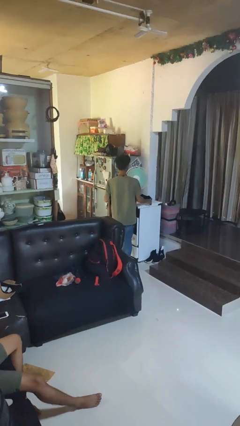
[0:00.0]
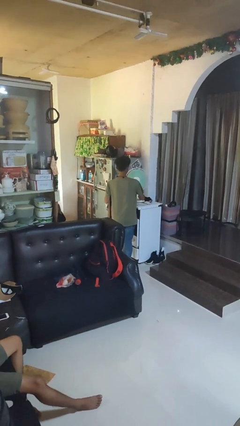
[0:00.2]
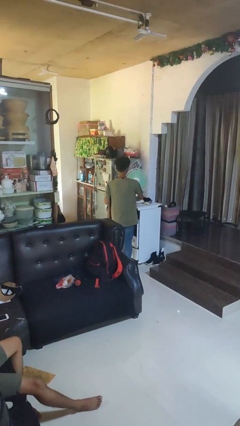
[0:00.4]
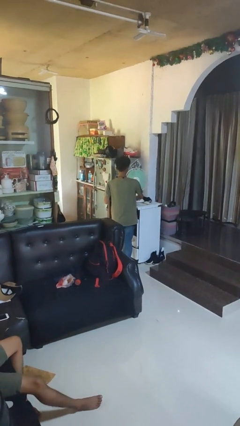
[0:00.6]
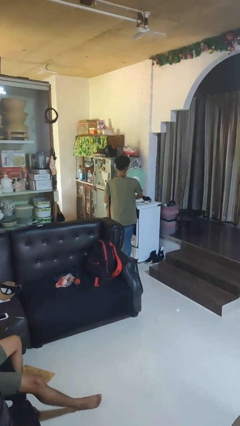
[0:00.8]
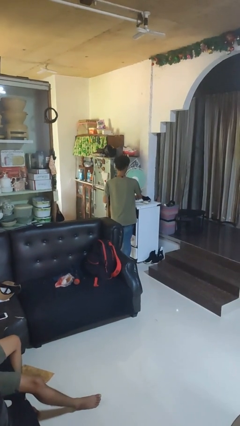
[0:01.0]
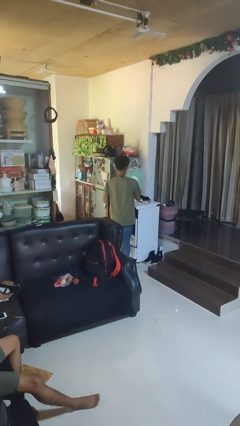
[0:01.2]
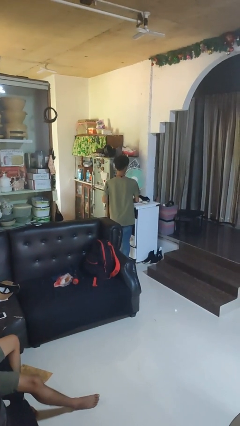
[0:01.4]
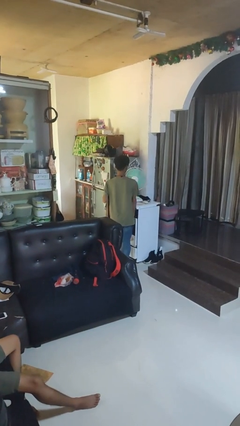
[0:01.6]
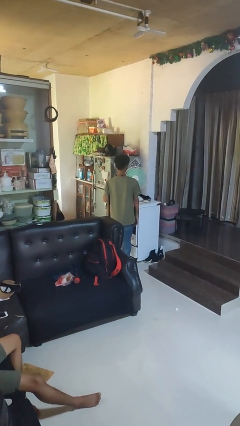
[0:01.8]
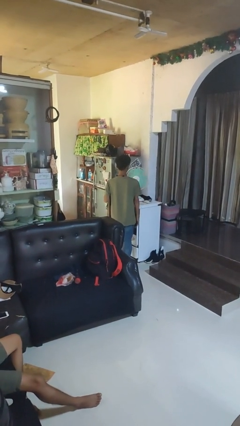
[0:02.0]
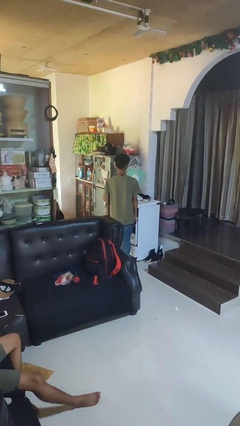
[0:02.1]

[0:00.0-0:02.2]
person turns off fan

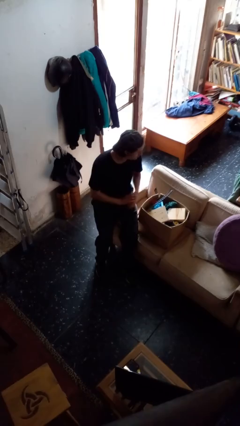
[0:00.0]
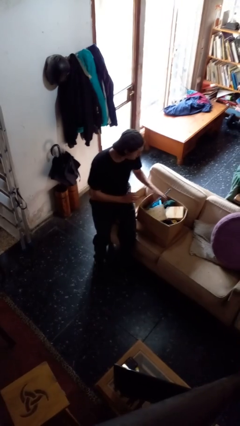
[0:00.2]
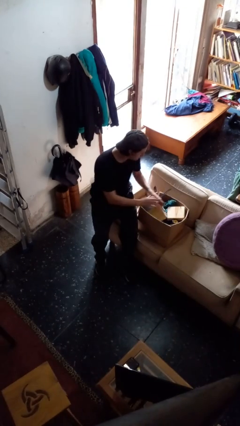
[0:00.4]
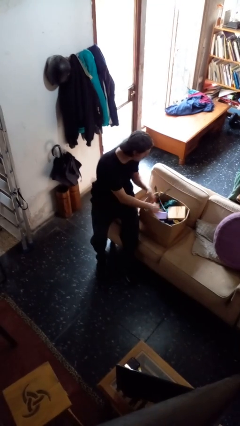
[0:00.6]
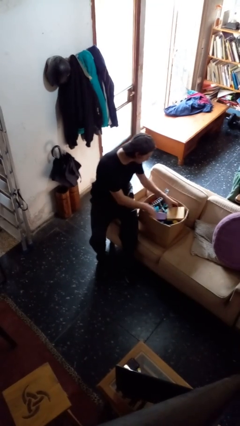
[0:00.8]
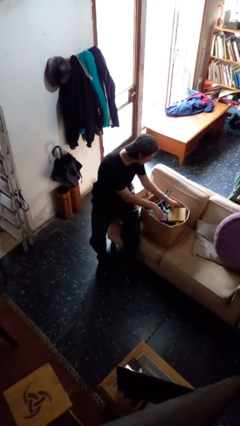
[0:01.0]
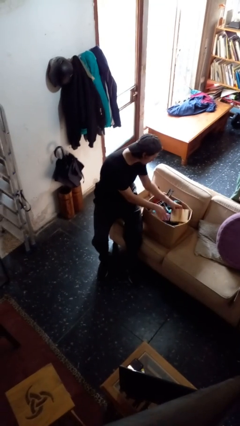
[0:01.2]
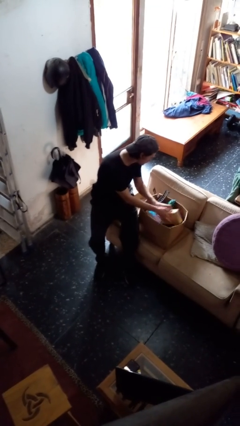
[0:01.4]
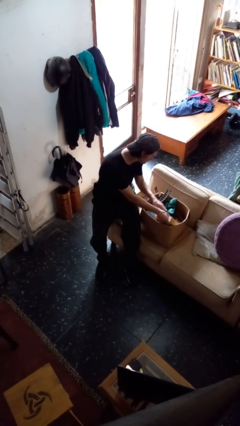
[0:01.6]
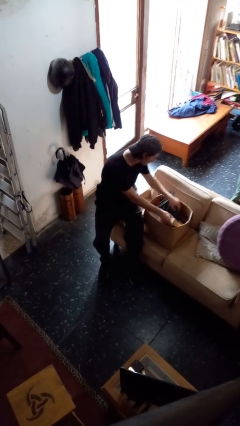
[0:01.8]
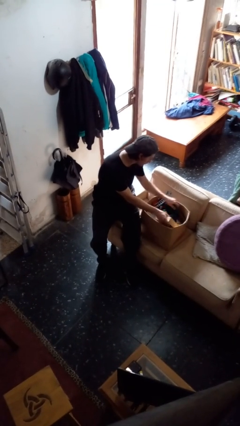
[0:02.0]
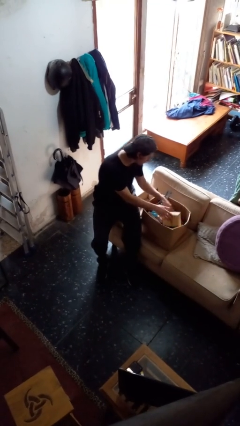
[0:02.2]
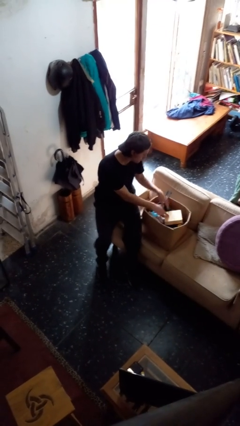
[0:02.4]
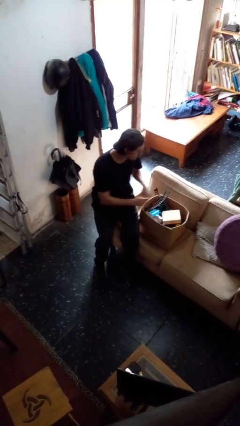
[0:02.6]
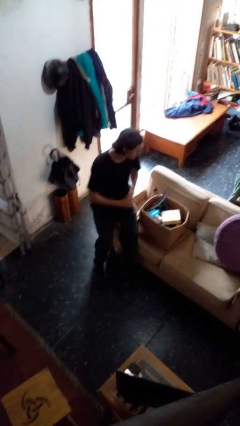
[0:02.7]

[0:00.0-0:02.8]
person searches in box

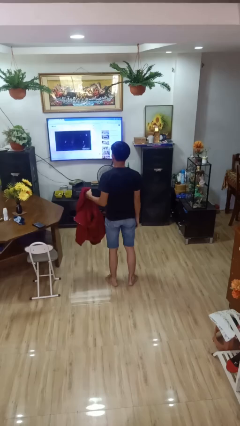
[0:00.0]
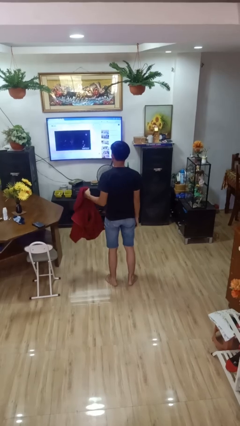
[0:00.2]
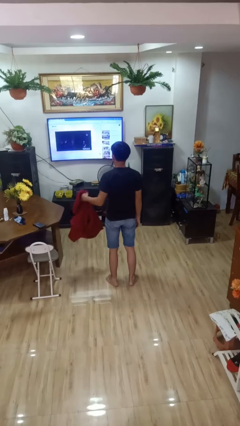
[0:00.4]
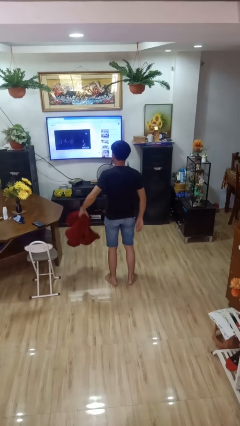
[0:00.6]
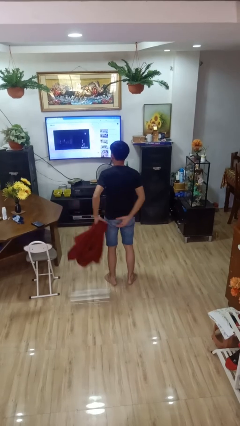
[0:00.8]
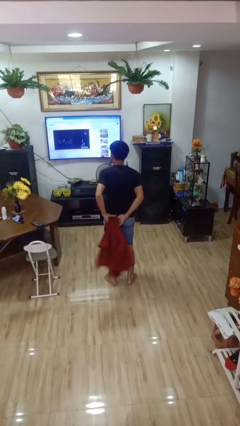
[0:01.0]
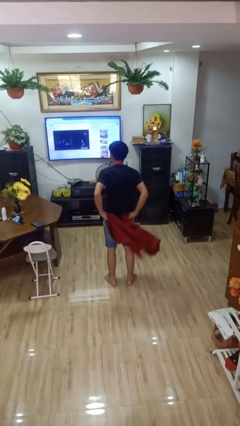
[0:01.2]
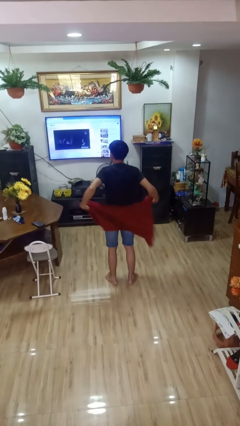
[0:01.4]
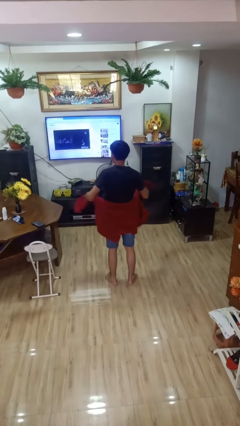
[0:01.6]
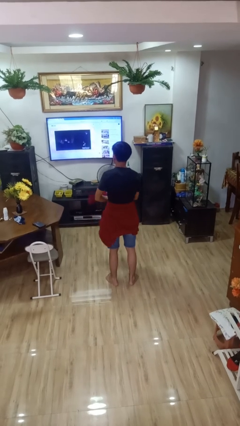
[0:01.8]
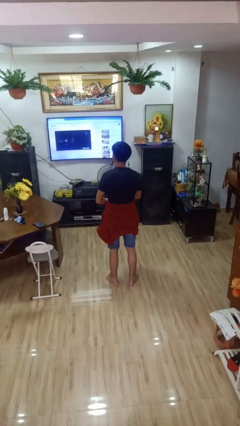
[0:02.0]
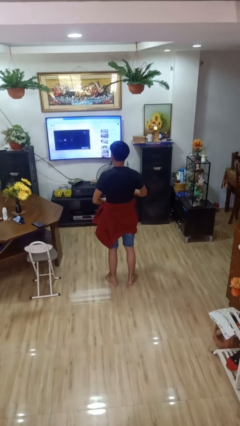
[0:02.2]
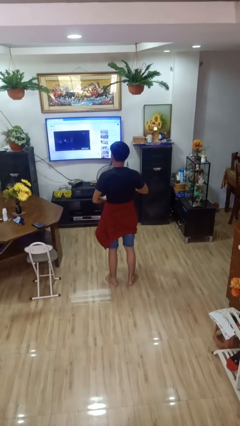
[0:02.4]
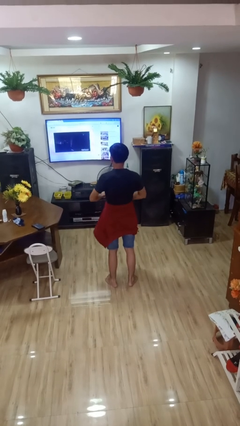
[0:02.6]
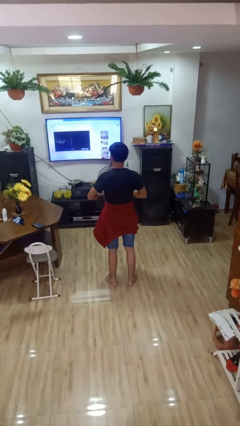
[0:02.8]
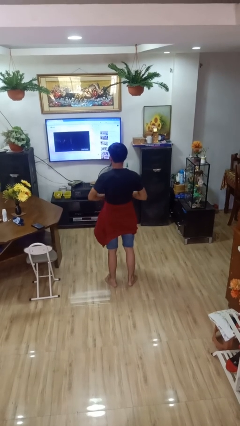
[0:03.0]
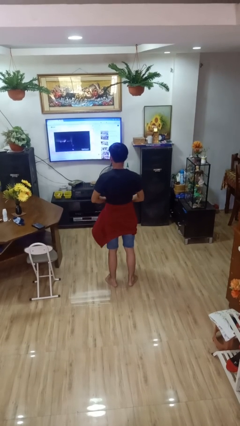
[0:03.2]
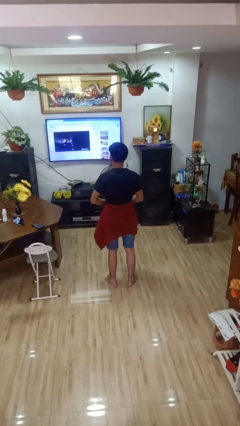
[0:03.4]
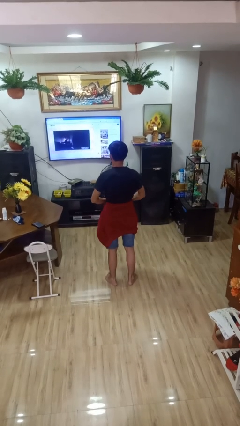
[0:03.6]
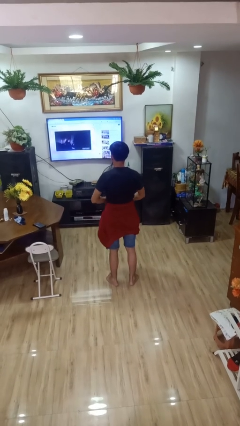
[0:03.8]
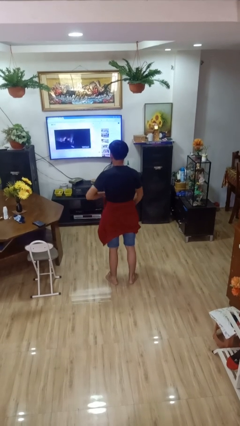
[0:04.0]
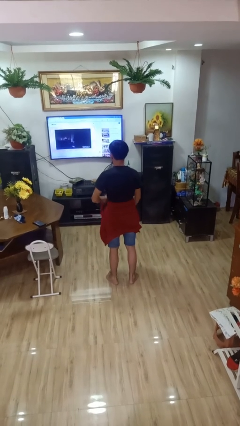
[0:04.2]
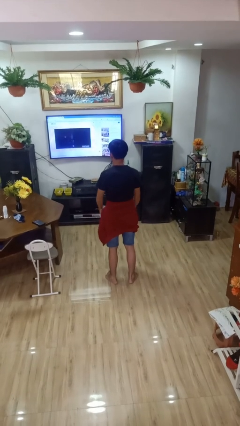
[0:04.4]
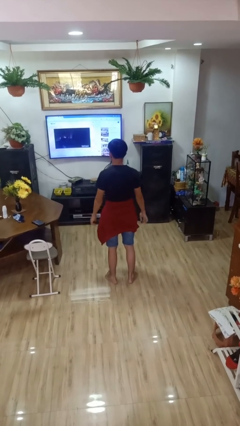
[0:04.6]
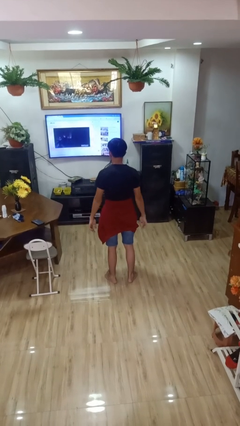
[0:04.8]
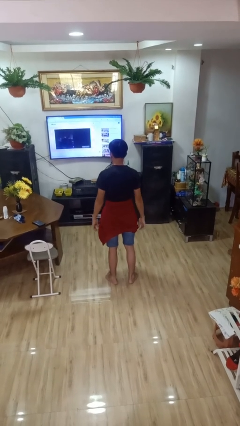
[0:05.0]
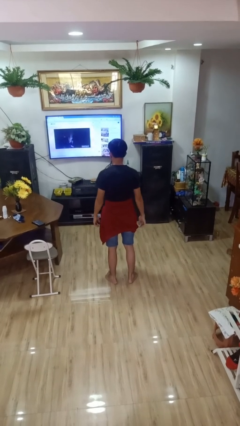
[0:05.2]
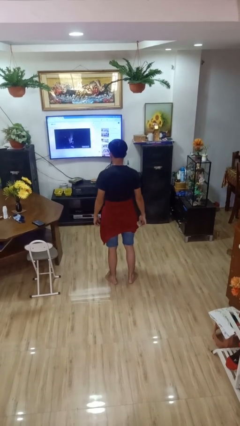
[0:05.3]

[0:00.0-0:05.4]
person ties jacket around waist

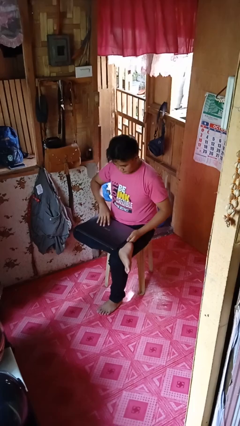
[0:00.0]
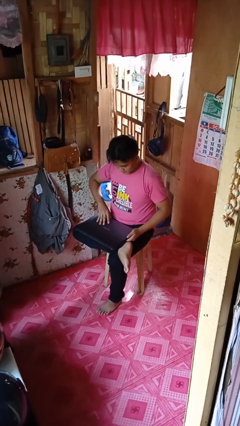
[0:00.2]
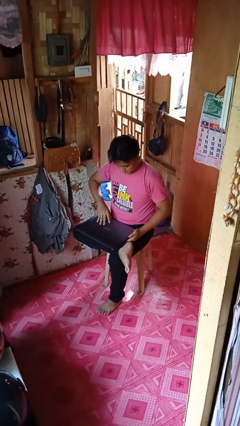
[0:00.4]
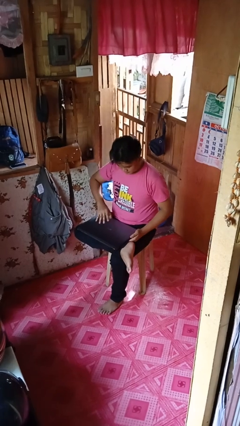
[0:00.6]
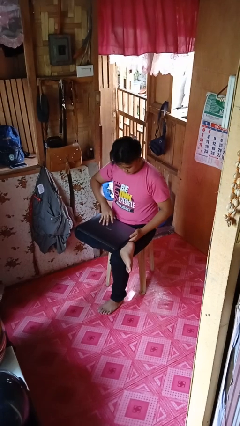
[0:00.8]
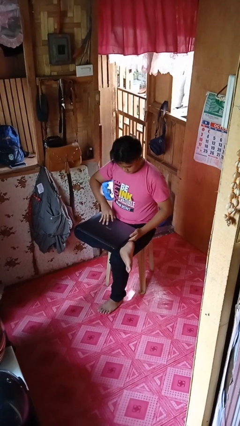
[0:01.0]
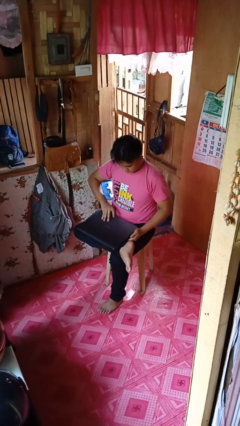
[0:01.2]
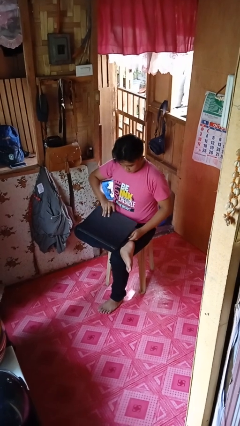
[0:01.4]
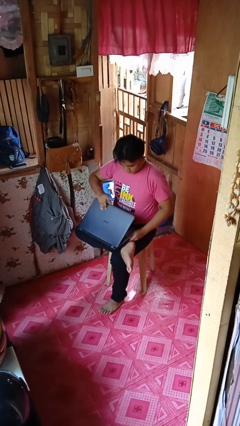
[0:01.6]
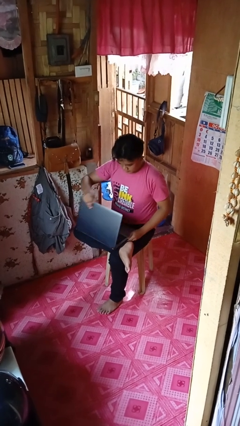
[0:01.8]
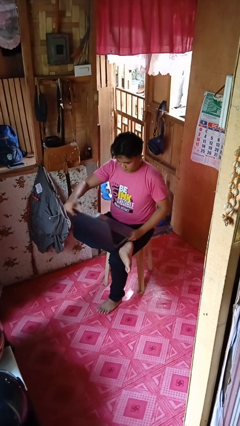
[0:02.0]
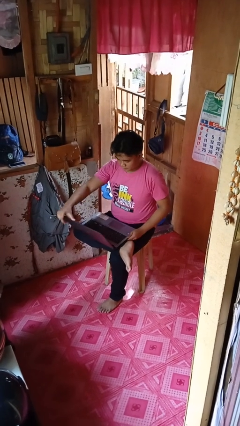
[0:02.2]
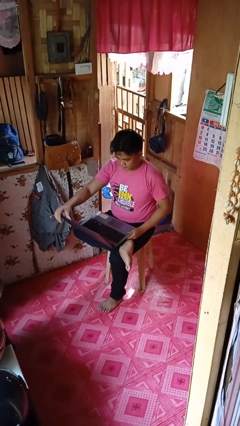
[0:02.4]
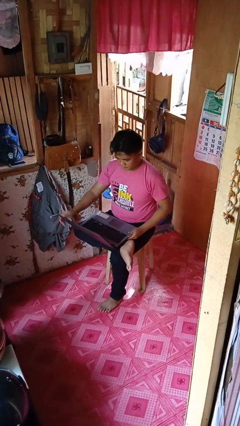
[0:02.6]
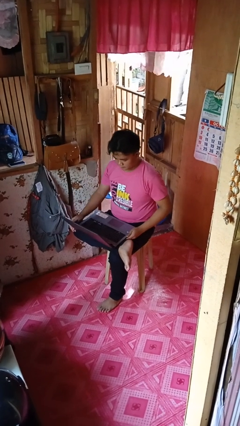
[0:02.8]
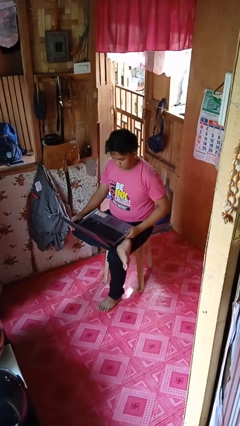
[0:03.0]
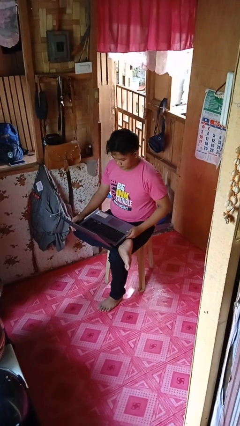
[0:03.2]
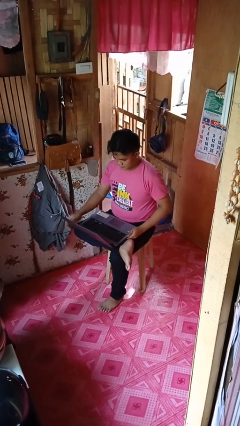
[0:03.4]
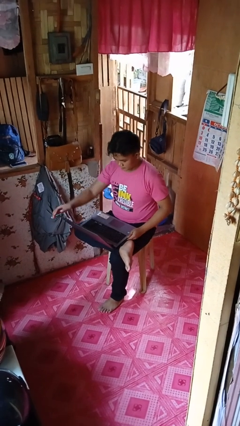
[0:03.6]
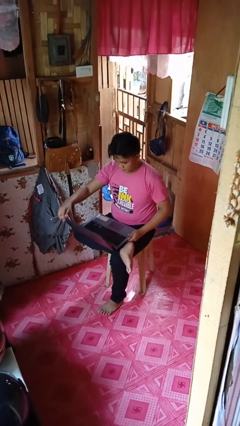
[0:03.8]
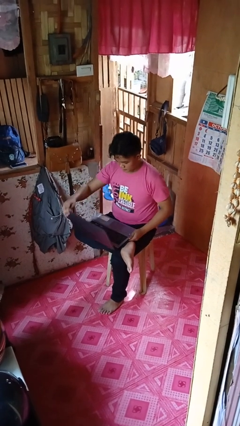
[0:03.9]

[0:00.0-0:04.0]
person opens laptop

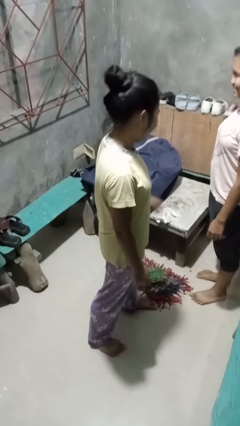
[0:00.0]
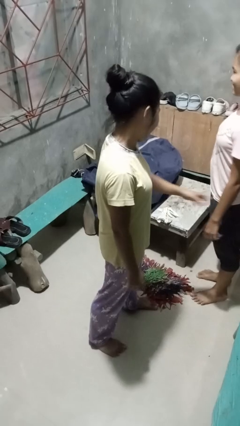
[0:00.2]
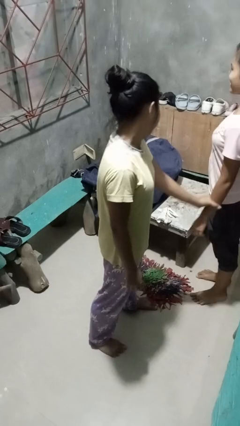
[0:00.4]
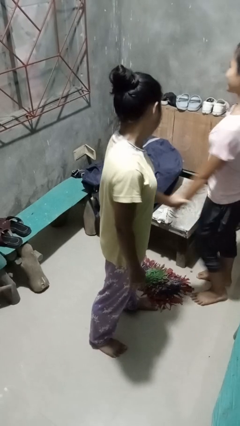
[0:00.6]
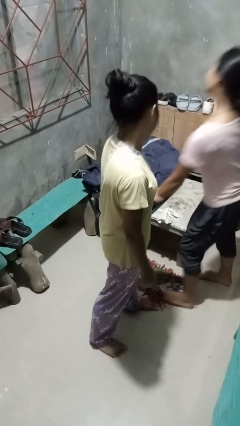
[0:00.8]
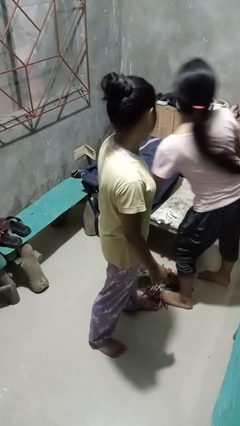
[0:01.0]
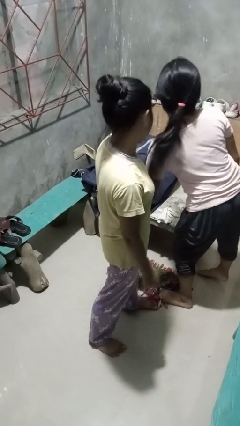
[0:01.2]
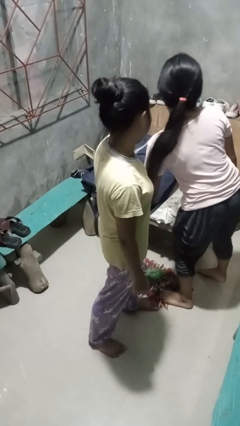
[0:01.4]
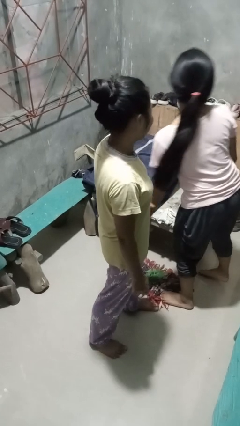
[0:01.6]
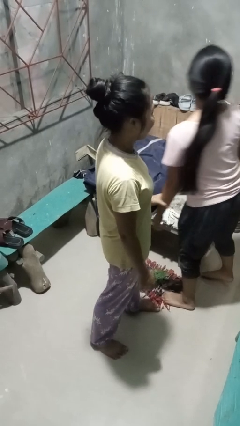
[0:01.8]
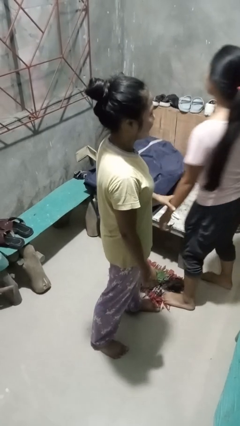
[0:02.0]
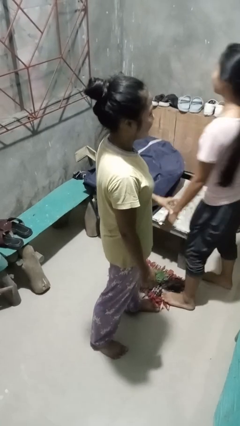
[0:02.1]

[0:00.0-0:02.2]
person grabs person by forearm

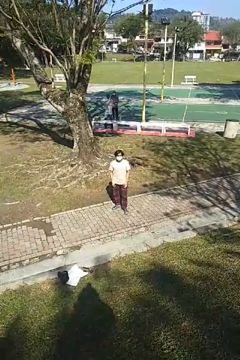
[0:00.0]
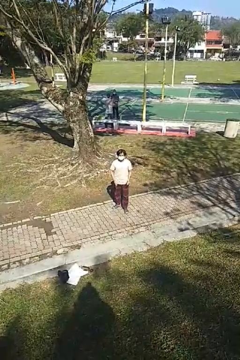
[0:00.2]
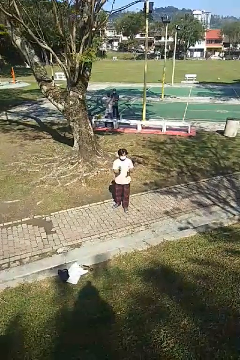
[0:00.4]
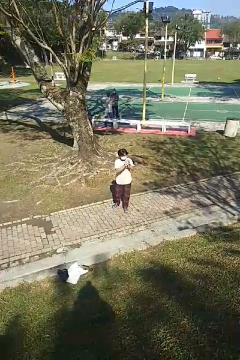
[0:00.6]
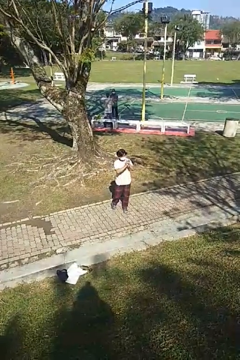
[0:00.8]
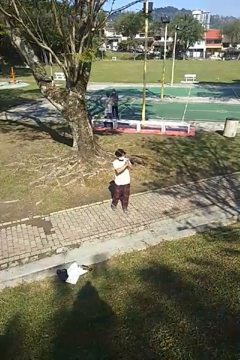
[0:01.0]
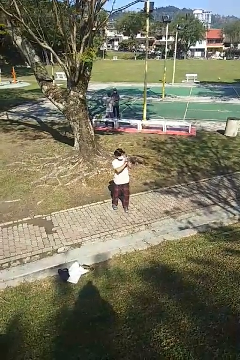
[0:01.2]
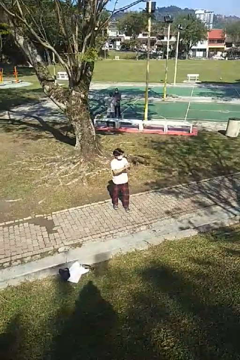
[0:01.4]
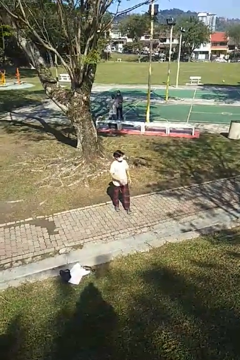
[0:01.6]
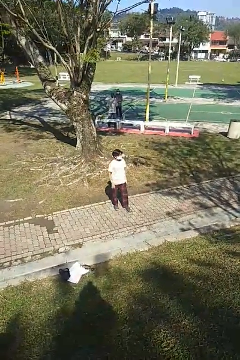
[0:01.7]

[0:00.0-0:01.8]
person claps hands
